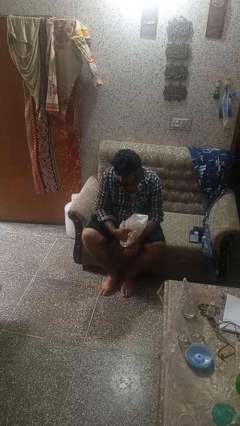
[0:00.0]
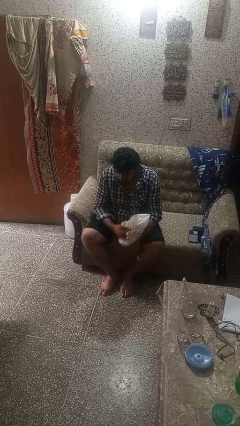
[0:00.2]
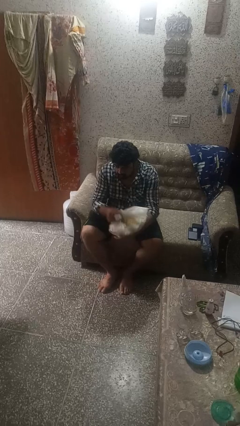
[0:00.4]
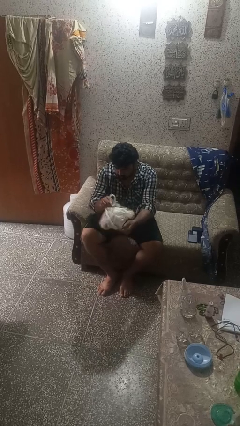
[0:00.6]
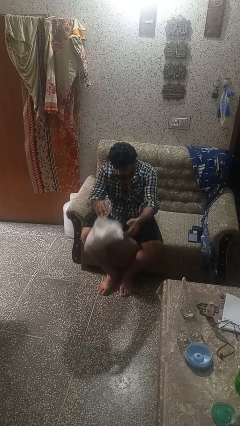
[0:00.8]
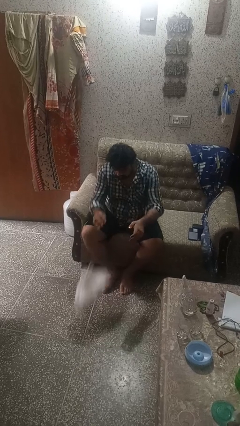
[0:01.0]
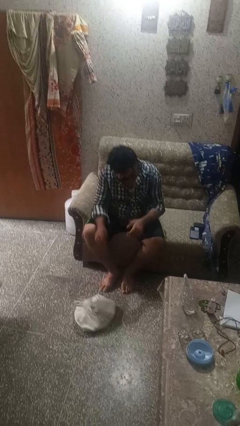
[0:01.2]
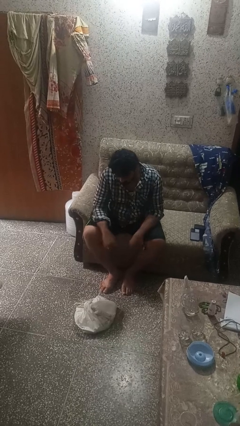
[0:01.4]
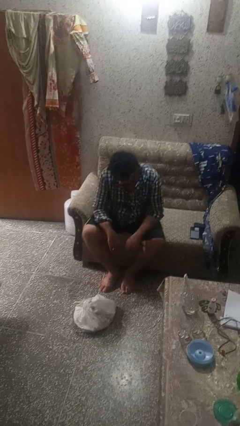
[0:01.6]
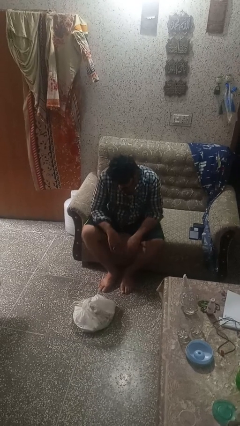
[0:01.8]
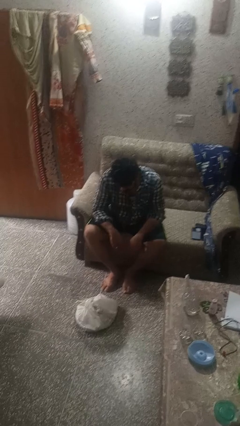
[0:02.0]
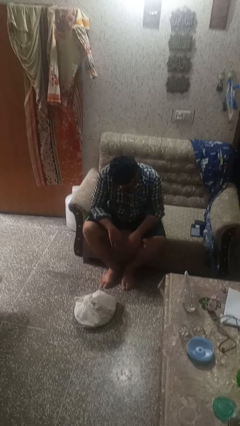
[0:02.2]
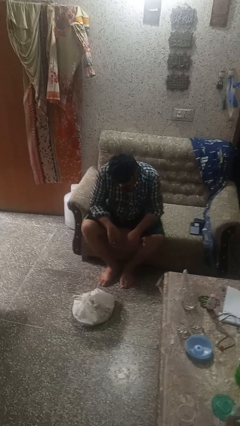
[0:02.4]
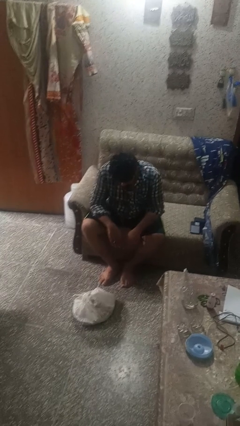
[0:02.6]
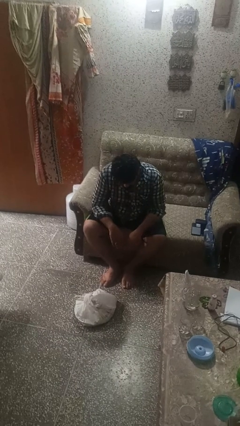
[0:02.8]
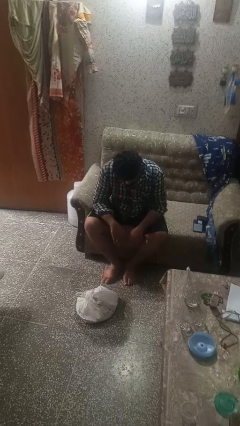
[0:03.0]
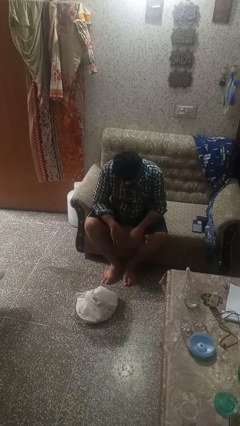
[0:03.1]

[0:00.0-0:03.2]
person throws object to ground

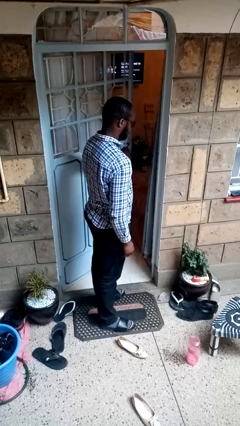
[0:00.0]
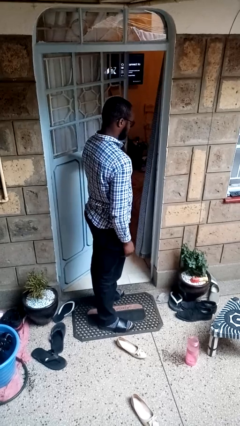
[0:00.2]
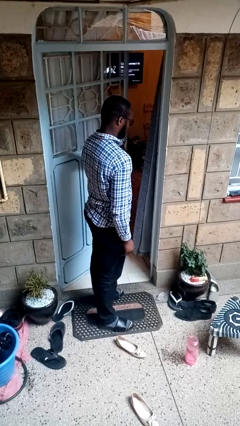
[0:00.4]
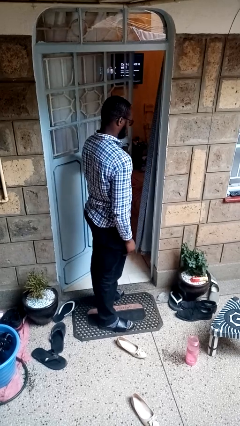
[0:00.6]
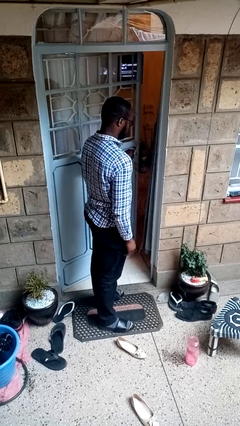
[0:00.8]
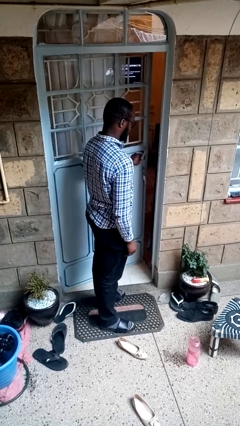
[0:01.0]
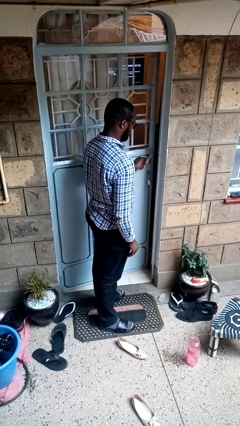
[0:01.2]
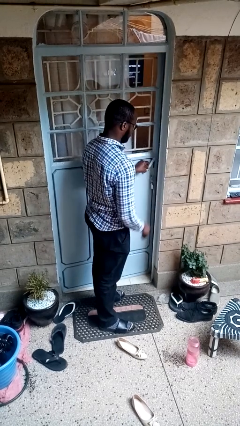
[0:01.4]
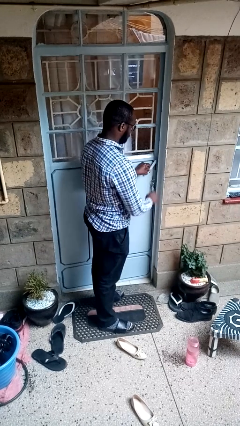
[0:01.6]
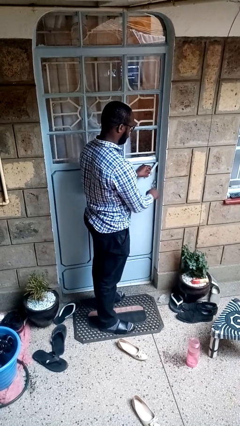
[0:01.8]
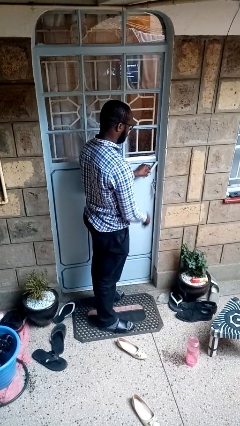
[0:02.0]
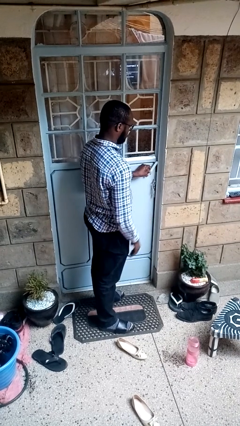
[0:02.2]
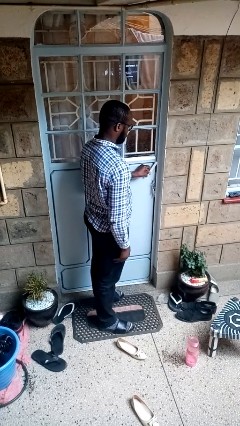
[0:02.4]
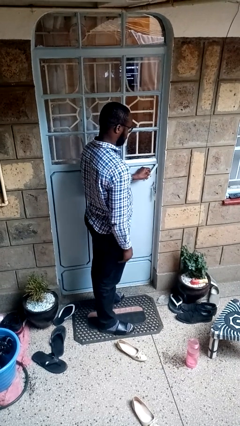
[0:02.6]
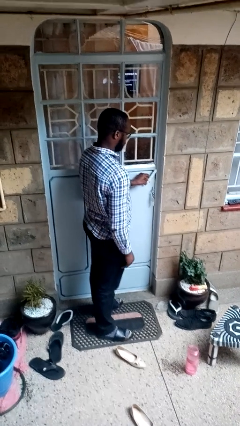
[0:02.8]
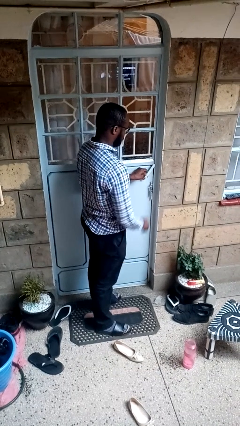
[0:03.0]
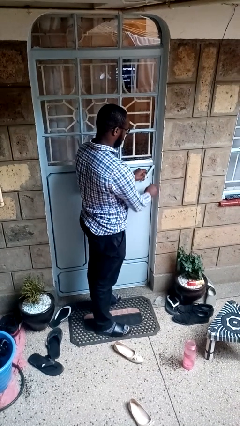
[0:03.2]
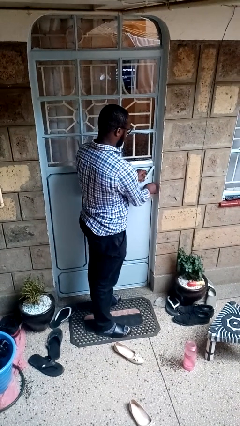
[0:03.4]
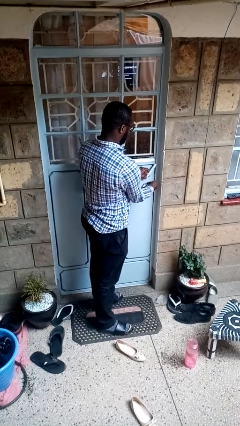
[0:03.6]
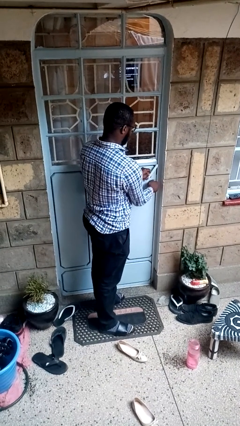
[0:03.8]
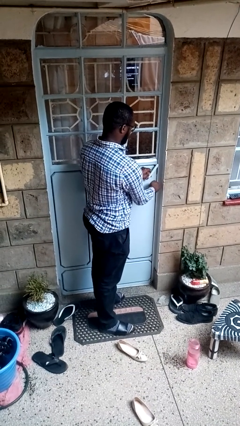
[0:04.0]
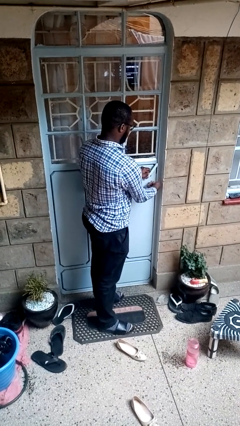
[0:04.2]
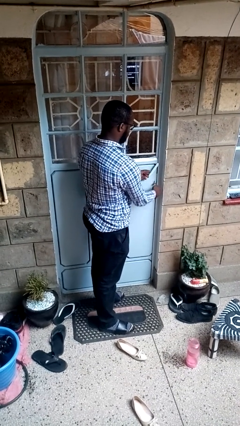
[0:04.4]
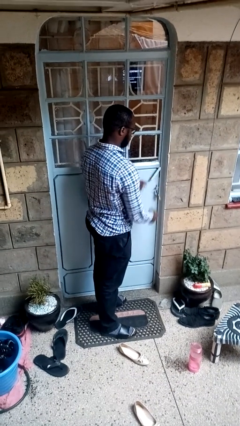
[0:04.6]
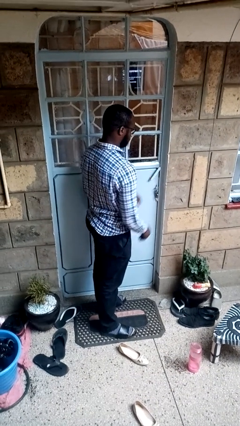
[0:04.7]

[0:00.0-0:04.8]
person closes facility door

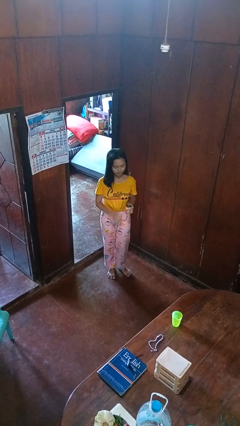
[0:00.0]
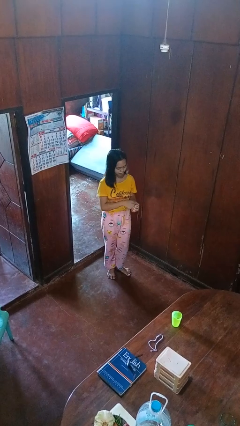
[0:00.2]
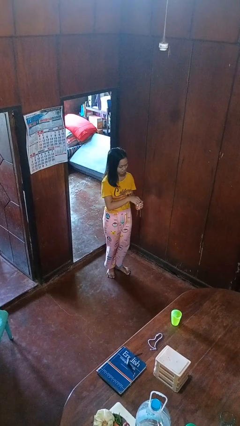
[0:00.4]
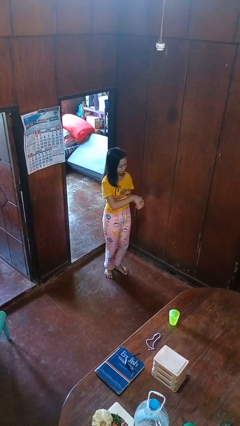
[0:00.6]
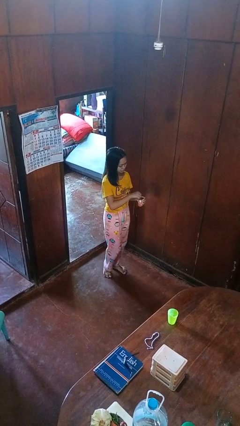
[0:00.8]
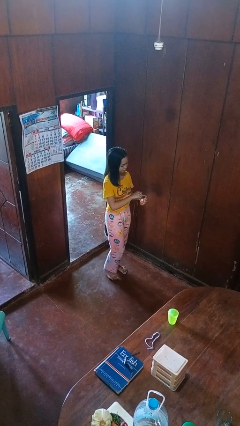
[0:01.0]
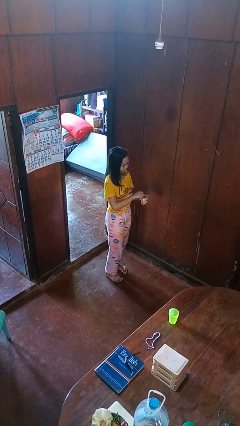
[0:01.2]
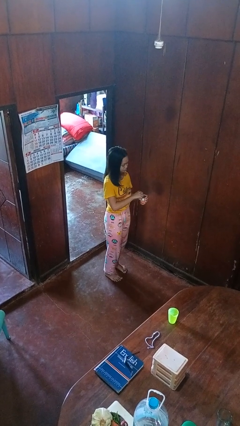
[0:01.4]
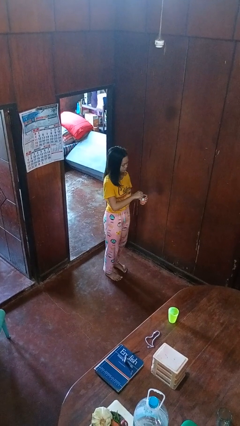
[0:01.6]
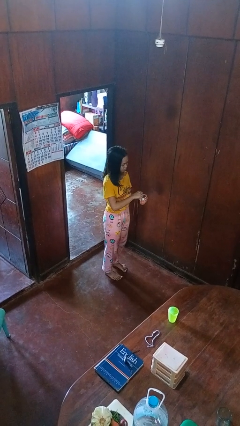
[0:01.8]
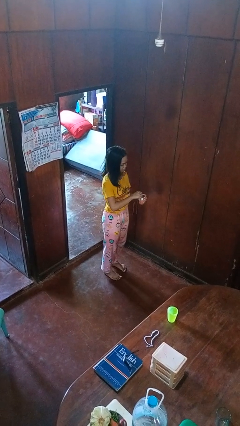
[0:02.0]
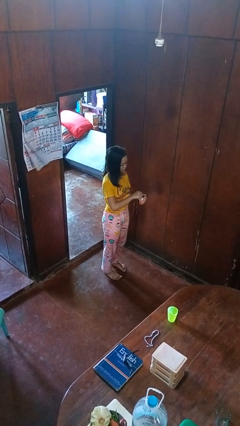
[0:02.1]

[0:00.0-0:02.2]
person opens beverage can

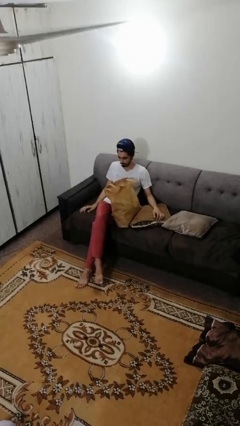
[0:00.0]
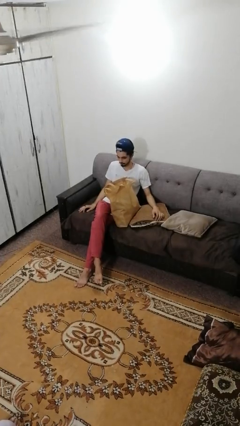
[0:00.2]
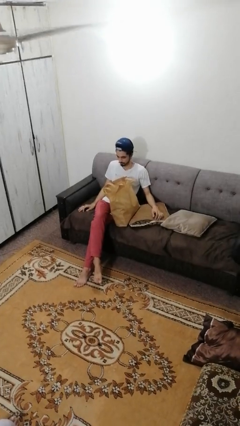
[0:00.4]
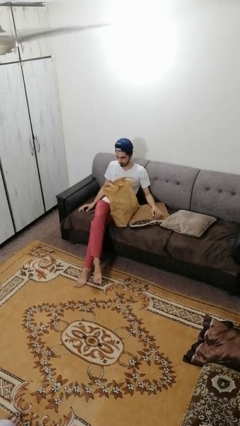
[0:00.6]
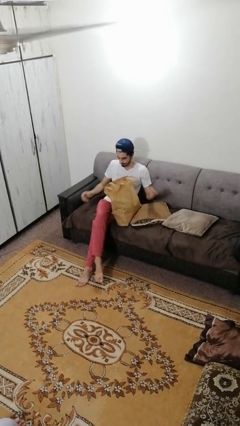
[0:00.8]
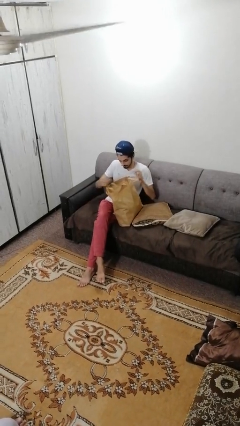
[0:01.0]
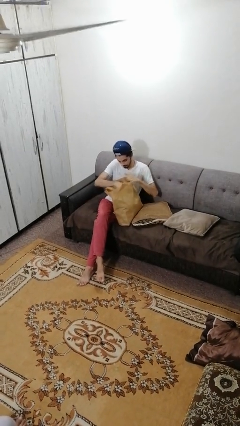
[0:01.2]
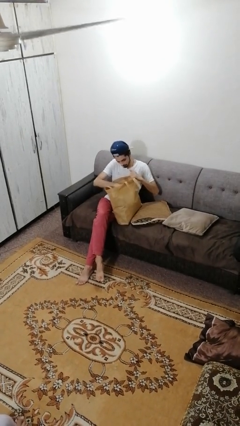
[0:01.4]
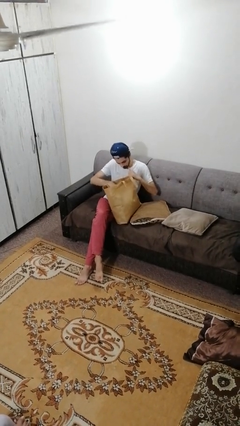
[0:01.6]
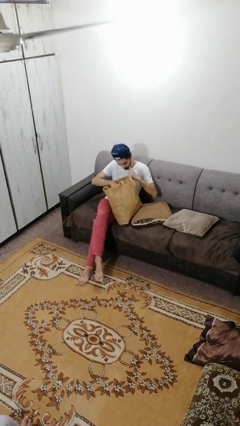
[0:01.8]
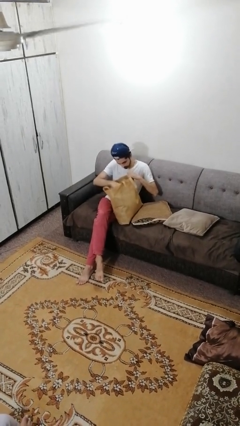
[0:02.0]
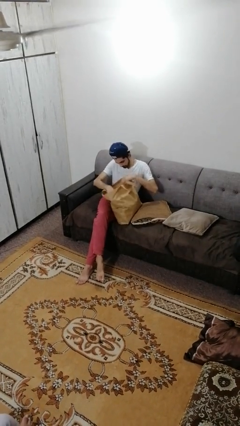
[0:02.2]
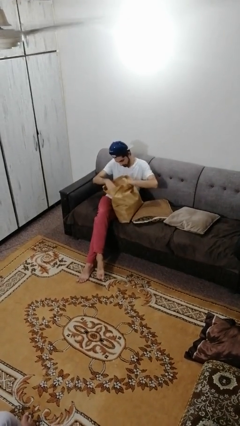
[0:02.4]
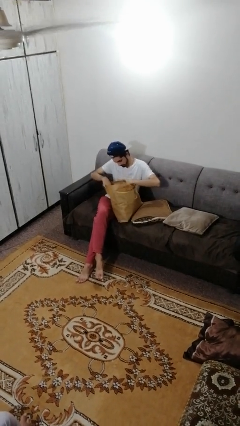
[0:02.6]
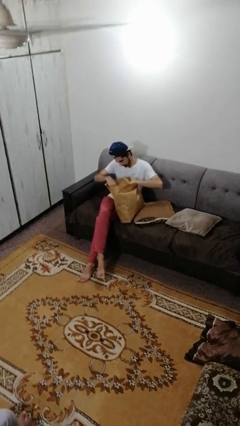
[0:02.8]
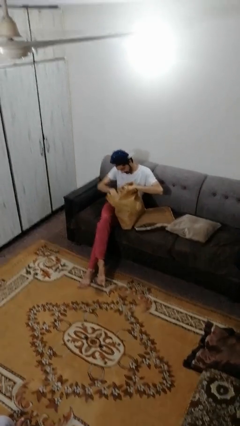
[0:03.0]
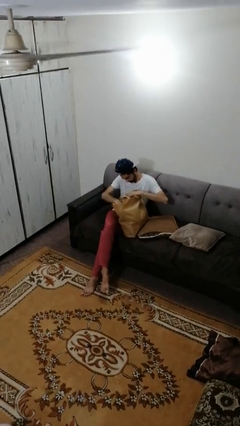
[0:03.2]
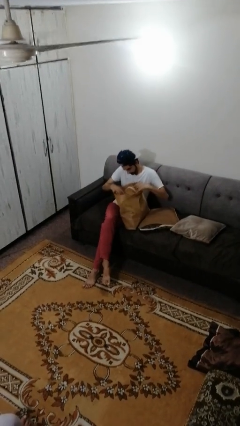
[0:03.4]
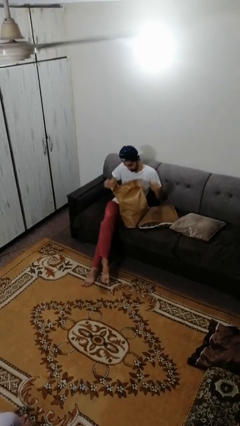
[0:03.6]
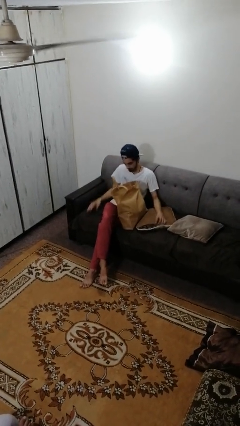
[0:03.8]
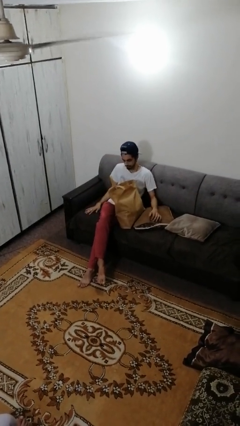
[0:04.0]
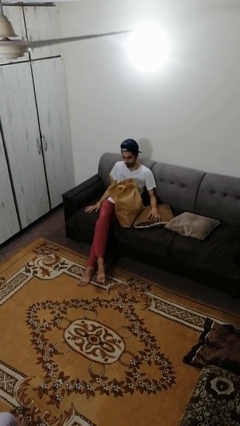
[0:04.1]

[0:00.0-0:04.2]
person searches in bag

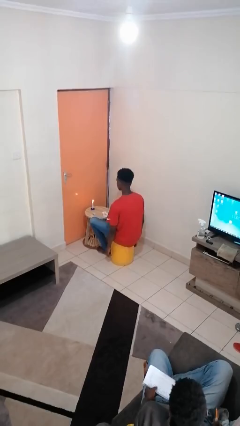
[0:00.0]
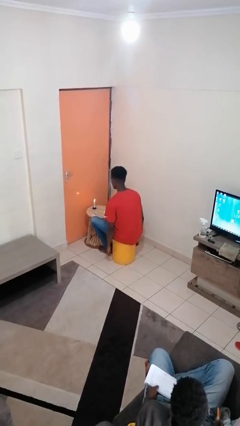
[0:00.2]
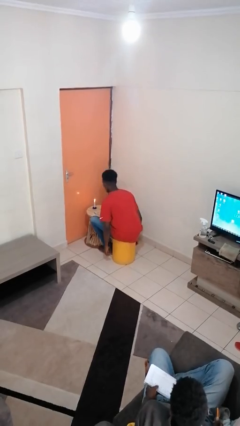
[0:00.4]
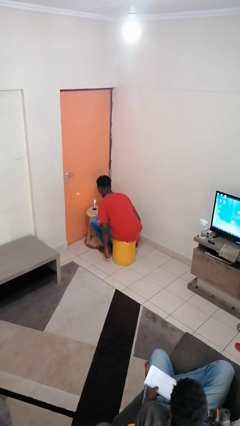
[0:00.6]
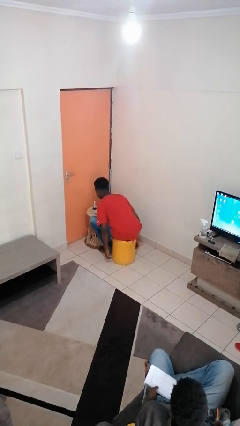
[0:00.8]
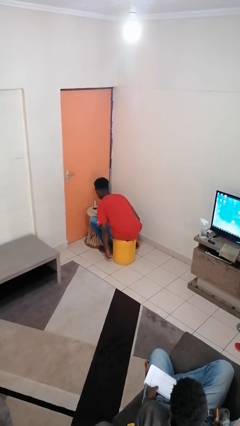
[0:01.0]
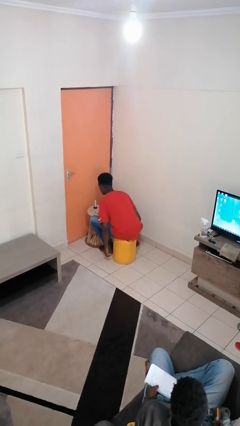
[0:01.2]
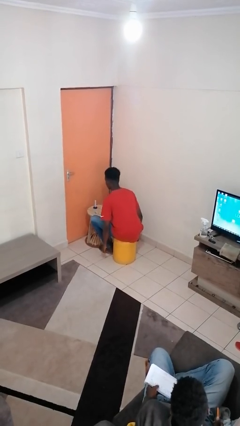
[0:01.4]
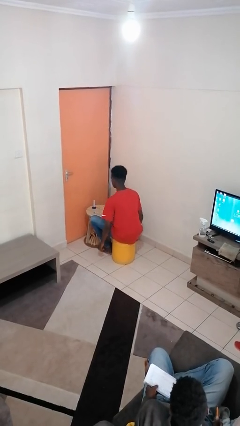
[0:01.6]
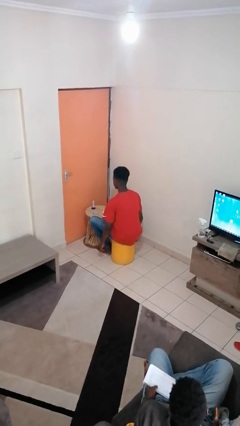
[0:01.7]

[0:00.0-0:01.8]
person extinguishes candle

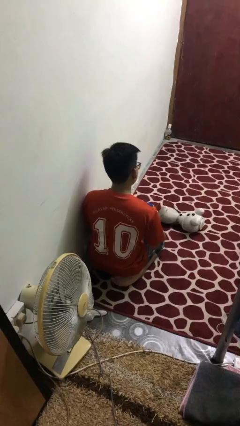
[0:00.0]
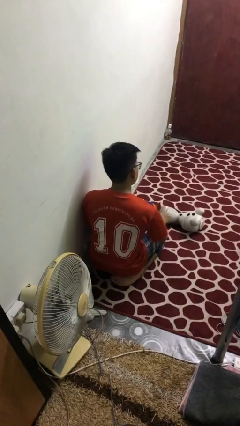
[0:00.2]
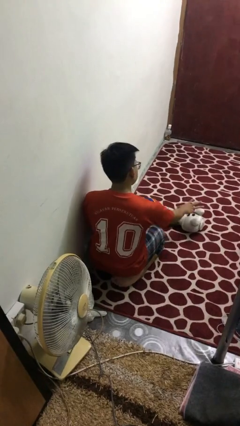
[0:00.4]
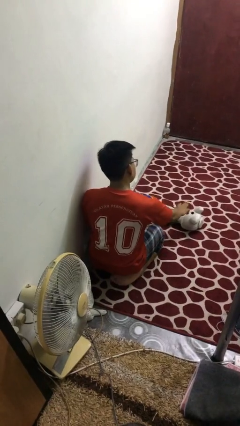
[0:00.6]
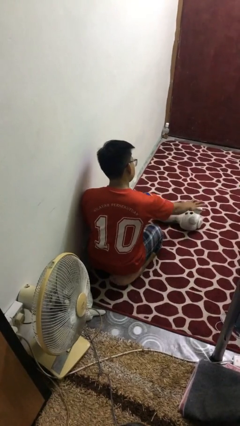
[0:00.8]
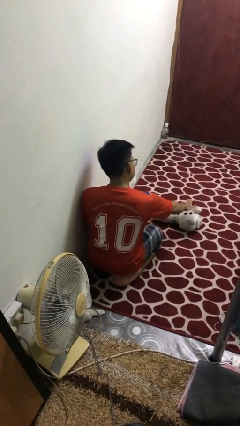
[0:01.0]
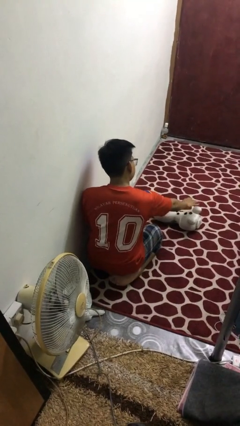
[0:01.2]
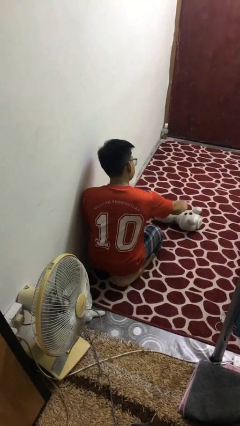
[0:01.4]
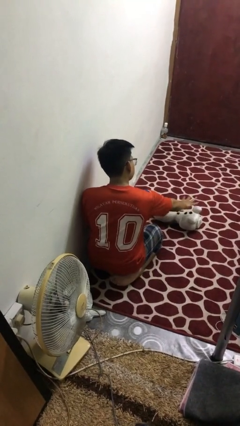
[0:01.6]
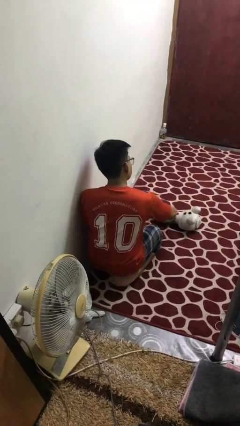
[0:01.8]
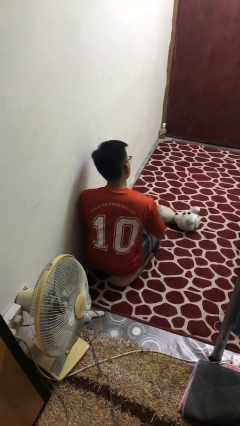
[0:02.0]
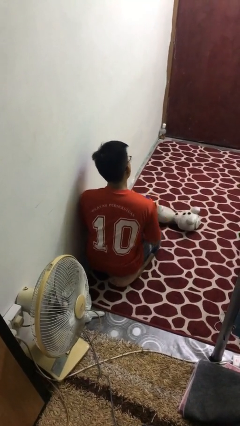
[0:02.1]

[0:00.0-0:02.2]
person waves hand over object
